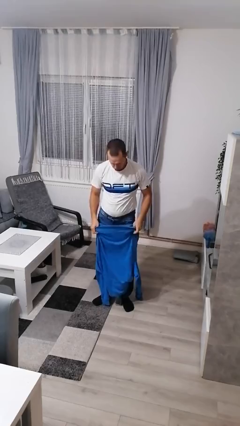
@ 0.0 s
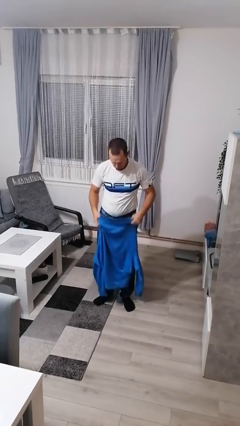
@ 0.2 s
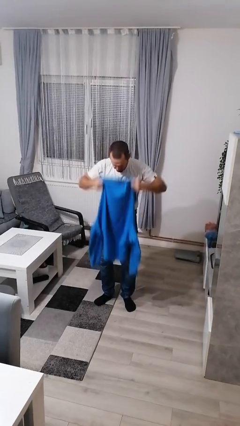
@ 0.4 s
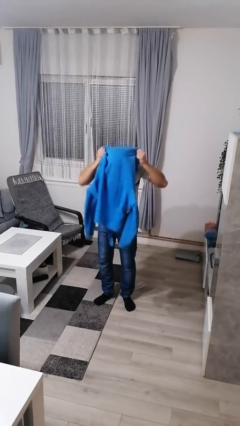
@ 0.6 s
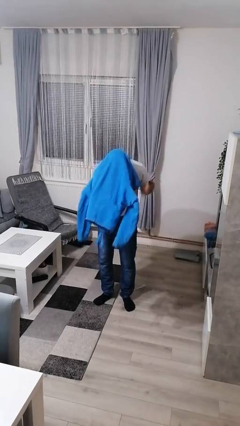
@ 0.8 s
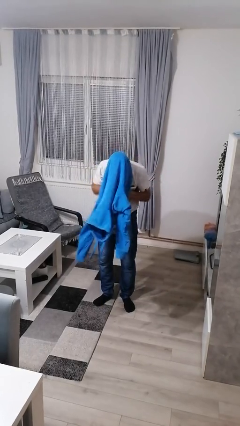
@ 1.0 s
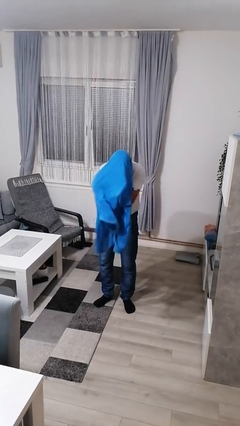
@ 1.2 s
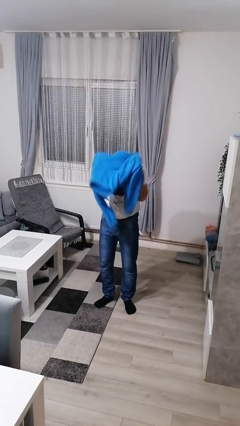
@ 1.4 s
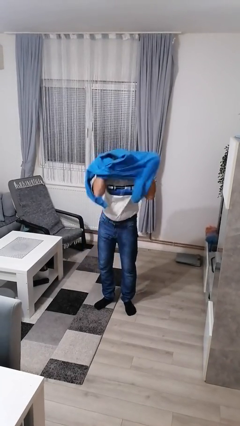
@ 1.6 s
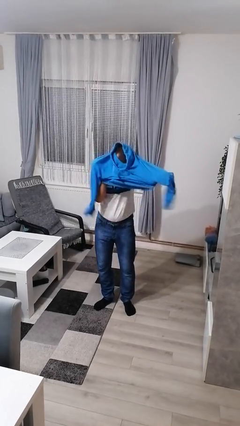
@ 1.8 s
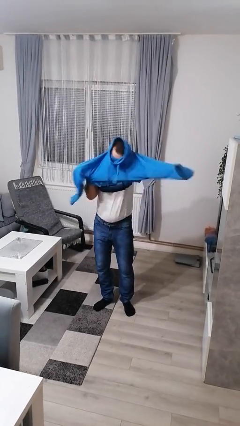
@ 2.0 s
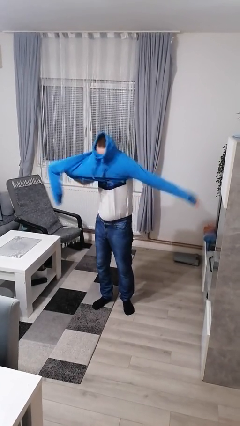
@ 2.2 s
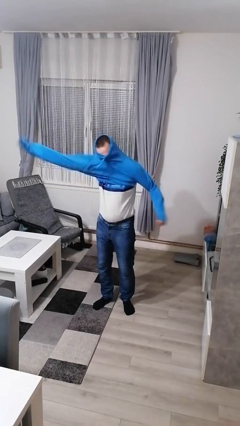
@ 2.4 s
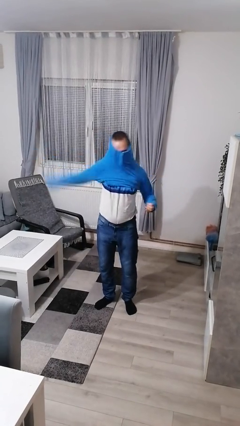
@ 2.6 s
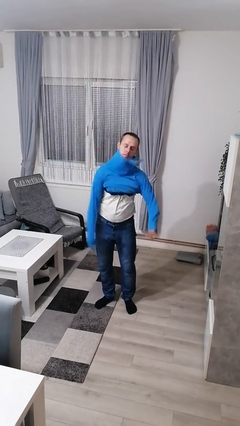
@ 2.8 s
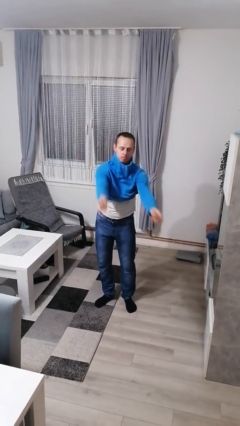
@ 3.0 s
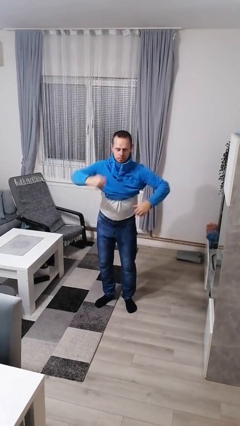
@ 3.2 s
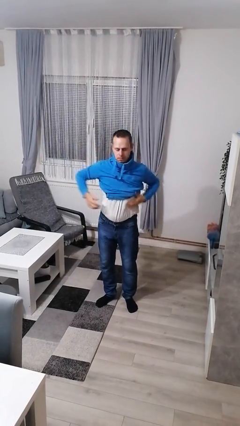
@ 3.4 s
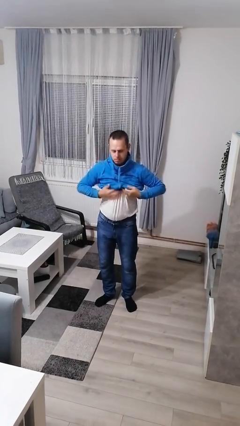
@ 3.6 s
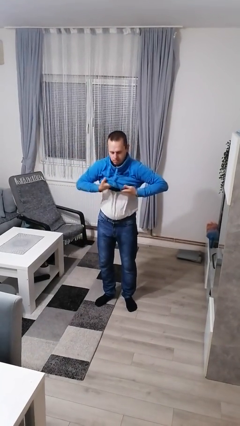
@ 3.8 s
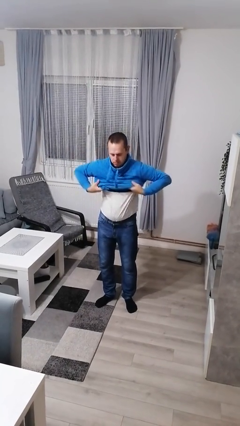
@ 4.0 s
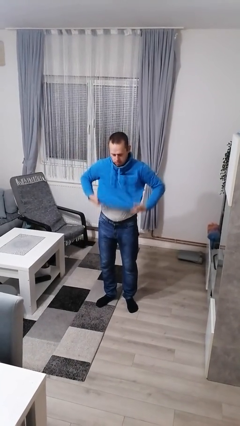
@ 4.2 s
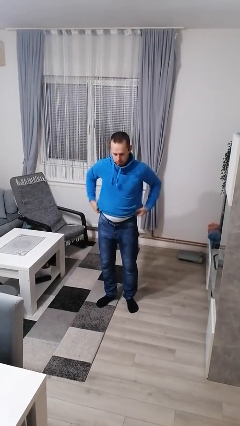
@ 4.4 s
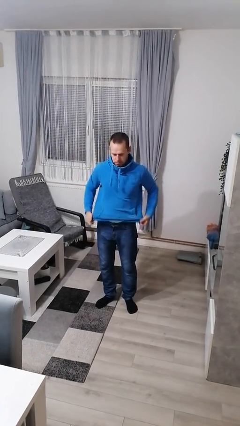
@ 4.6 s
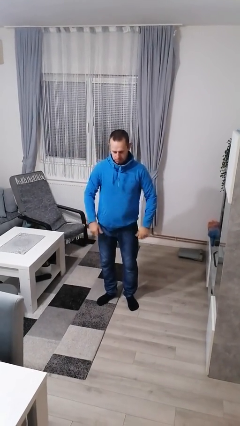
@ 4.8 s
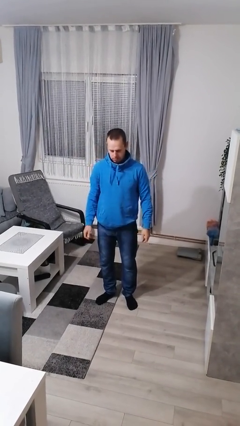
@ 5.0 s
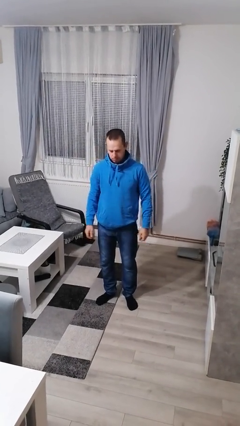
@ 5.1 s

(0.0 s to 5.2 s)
person puts on hoodie

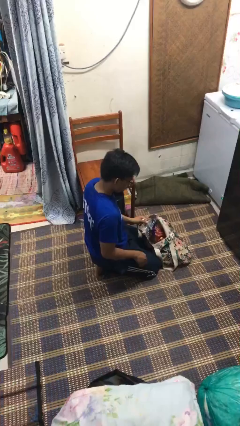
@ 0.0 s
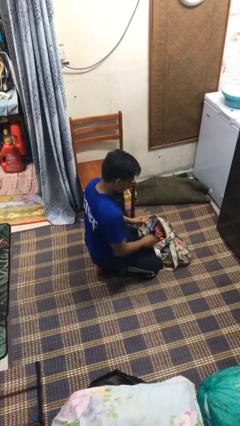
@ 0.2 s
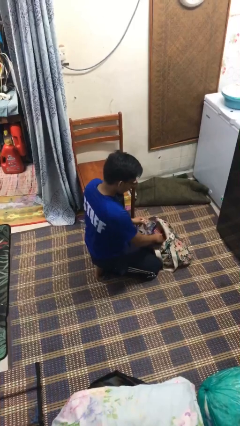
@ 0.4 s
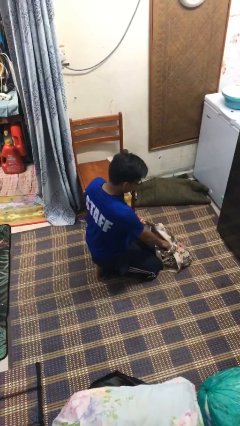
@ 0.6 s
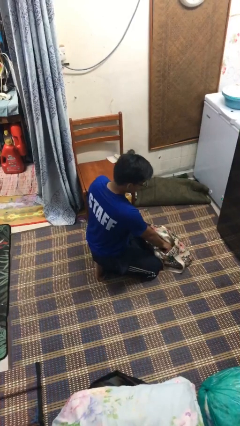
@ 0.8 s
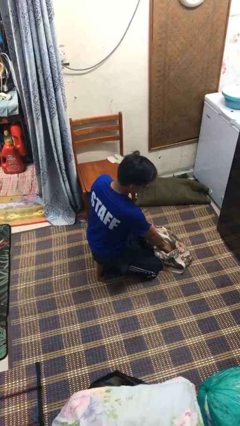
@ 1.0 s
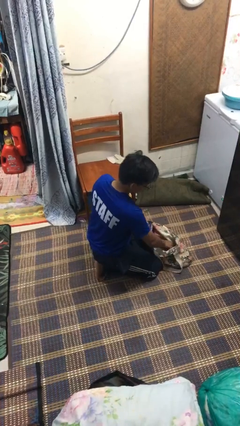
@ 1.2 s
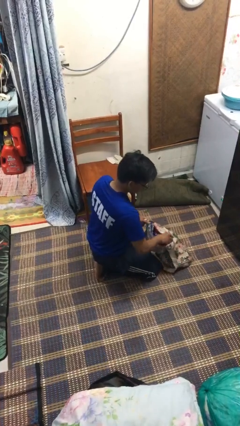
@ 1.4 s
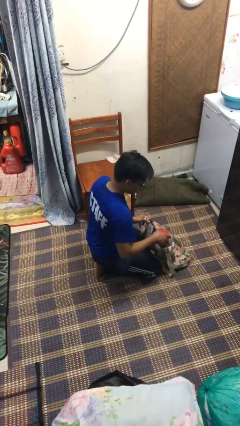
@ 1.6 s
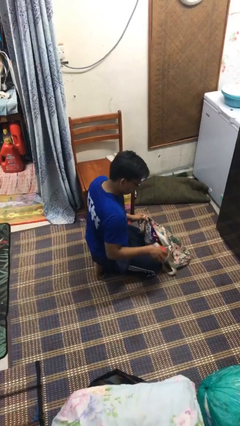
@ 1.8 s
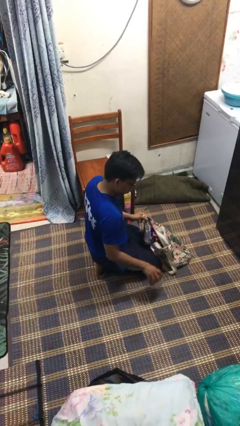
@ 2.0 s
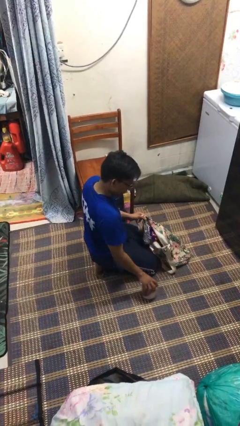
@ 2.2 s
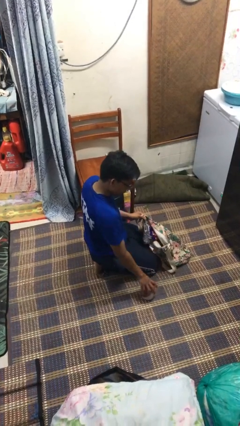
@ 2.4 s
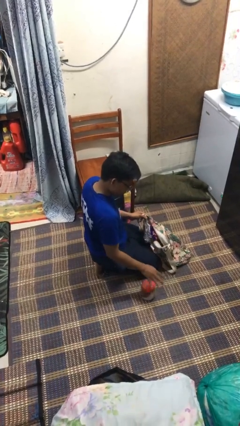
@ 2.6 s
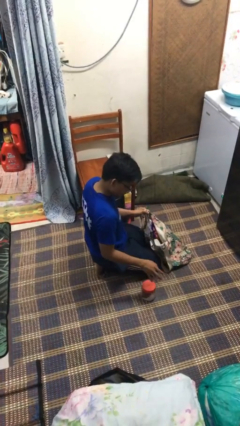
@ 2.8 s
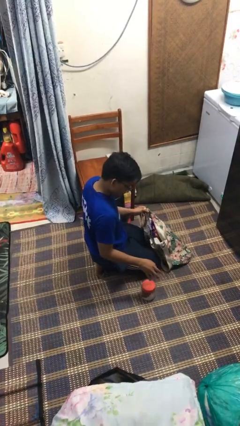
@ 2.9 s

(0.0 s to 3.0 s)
person takes object from bag

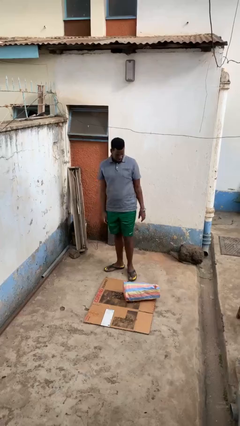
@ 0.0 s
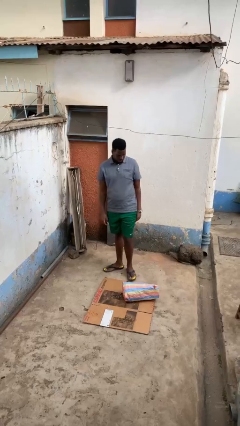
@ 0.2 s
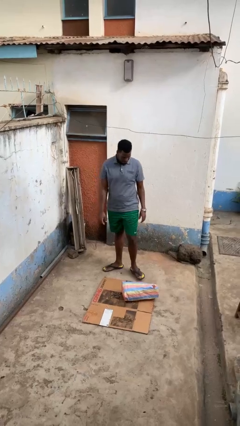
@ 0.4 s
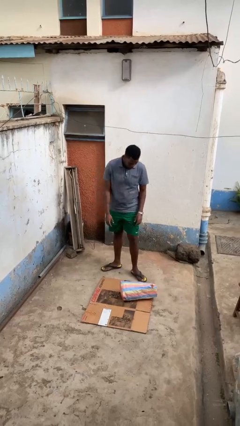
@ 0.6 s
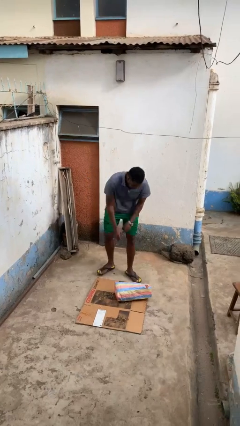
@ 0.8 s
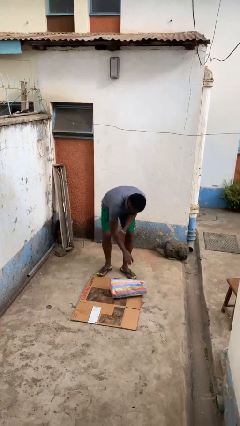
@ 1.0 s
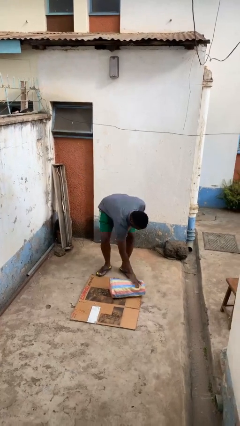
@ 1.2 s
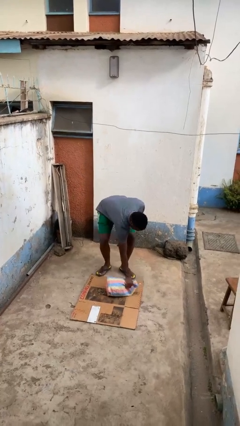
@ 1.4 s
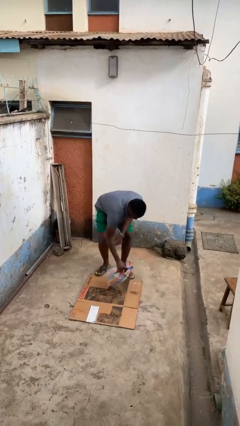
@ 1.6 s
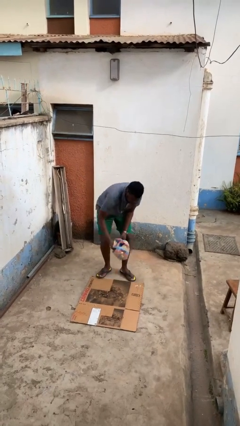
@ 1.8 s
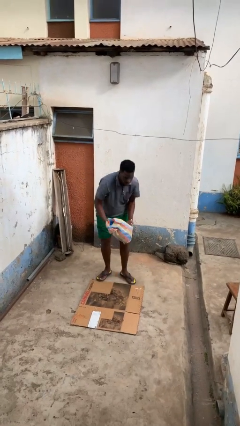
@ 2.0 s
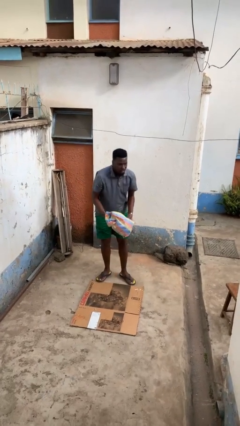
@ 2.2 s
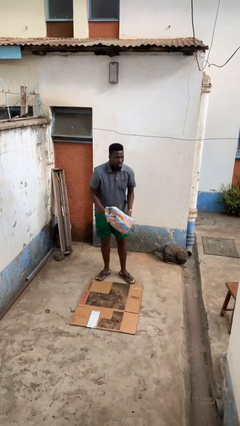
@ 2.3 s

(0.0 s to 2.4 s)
person picks up object from floor

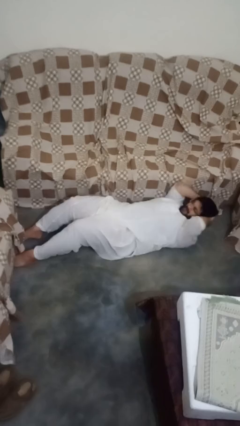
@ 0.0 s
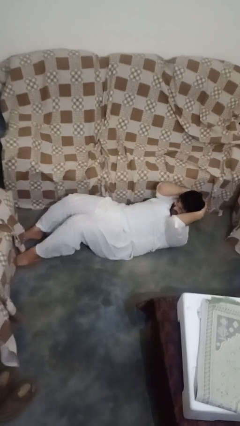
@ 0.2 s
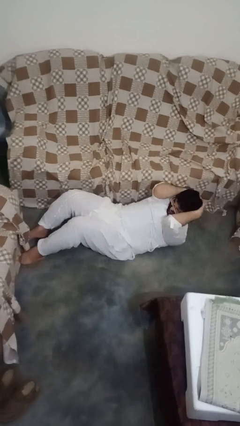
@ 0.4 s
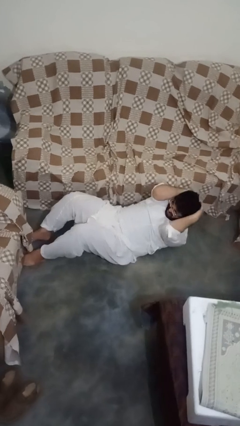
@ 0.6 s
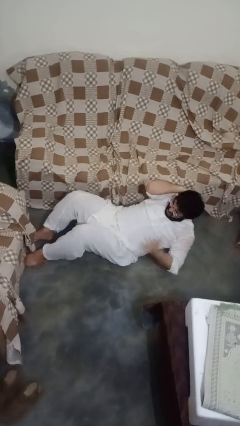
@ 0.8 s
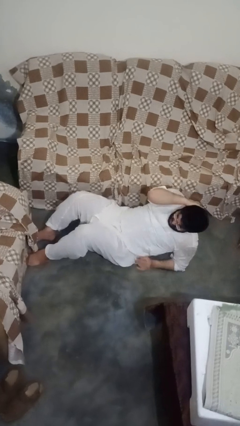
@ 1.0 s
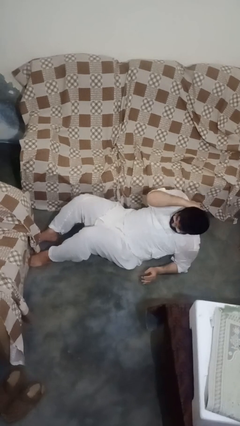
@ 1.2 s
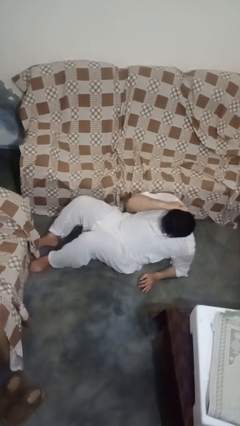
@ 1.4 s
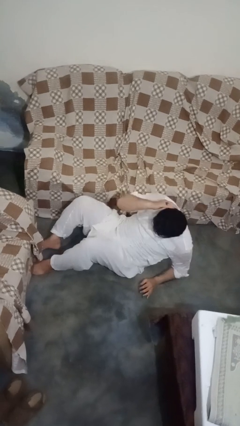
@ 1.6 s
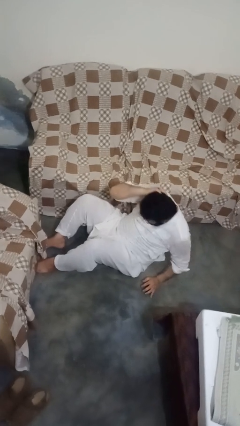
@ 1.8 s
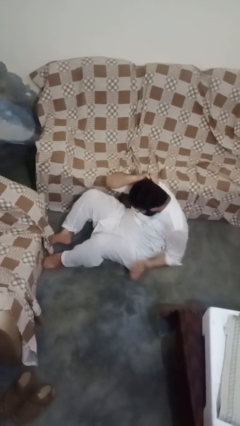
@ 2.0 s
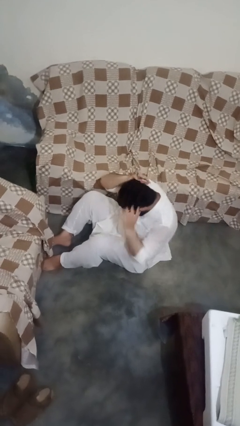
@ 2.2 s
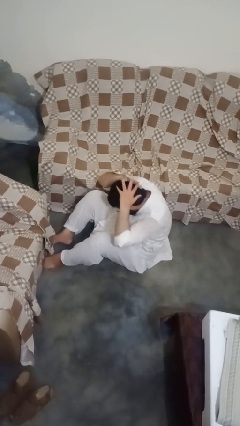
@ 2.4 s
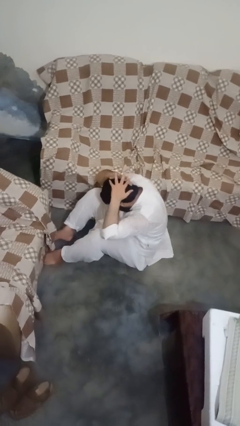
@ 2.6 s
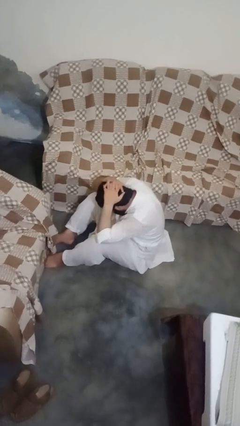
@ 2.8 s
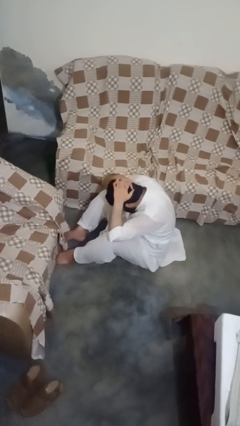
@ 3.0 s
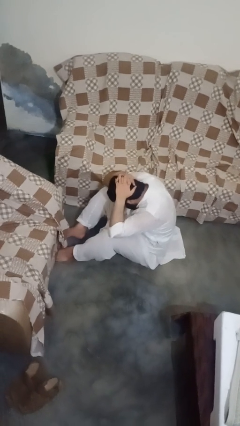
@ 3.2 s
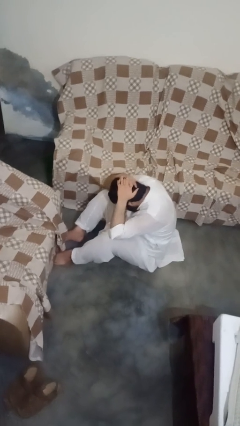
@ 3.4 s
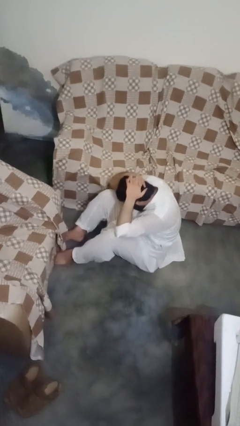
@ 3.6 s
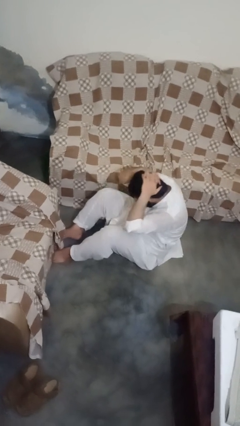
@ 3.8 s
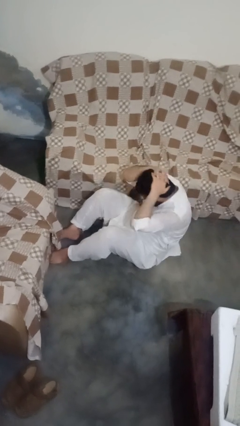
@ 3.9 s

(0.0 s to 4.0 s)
person exercises with situp

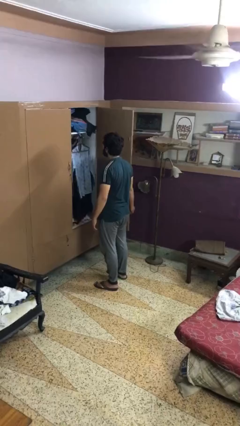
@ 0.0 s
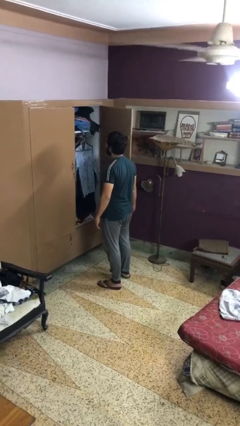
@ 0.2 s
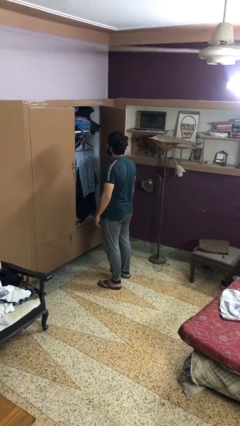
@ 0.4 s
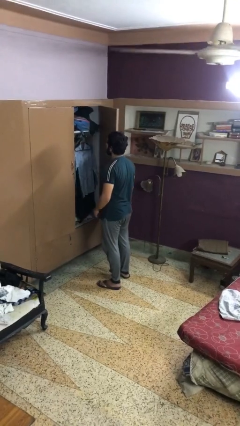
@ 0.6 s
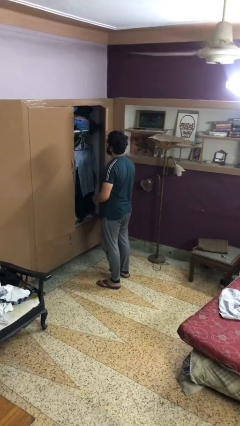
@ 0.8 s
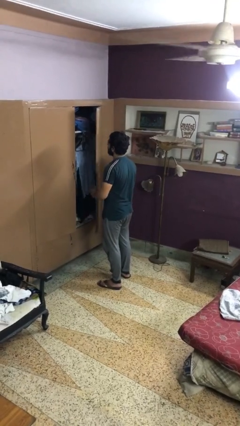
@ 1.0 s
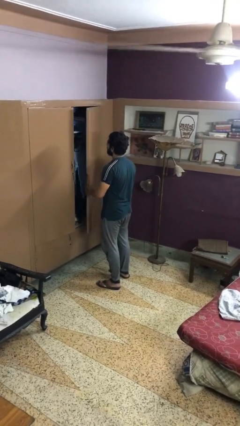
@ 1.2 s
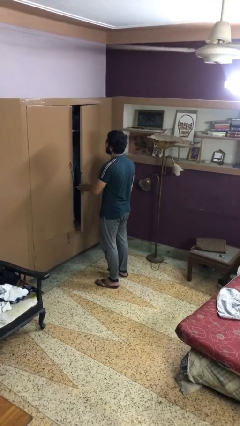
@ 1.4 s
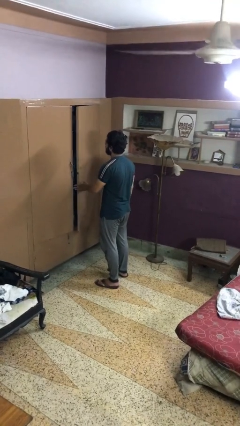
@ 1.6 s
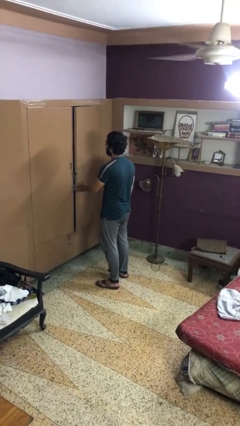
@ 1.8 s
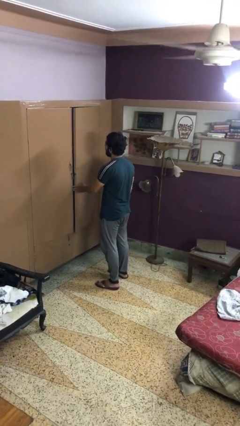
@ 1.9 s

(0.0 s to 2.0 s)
person closes closet door

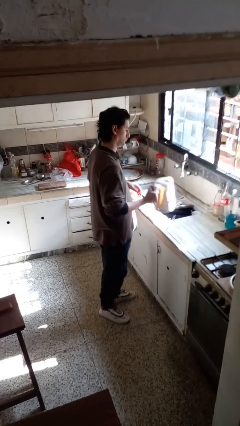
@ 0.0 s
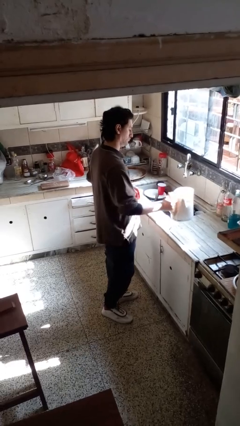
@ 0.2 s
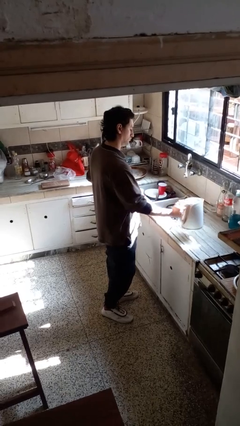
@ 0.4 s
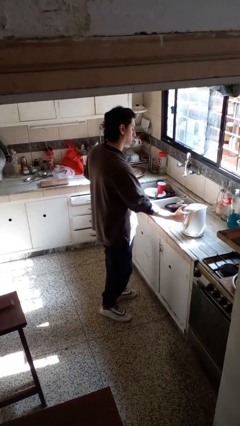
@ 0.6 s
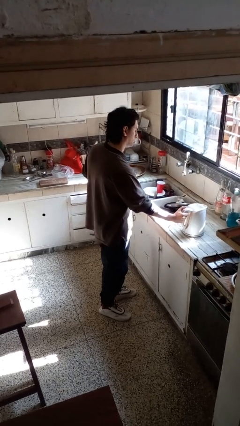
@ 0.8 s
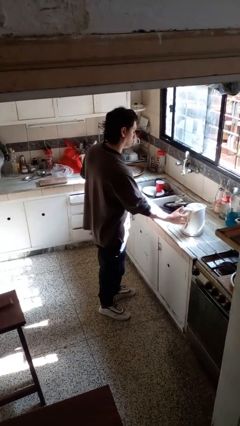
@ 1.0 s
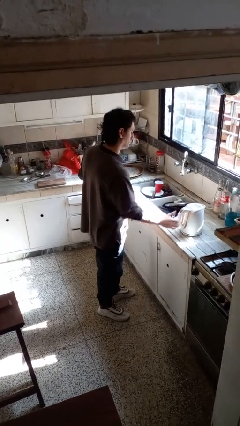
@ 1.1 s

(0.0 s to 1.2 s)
person puts down object on countertop
